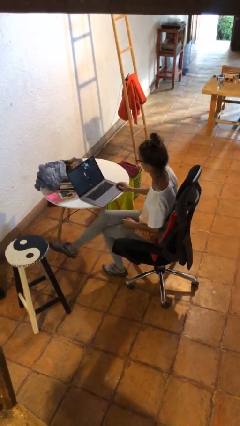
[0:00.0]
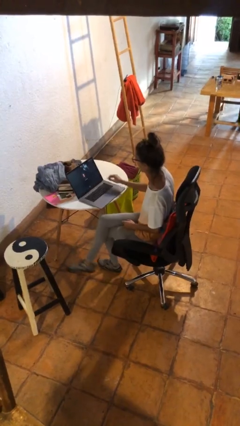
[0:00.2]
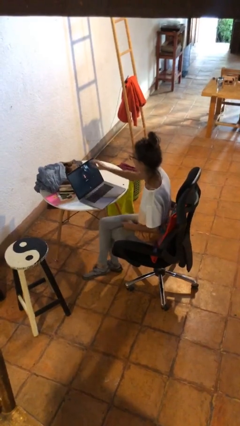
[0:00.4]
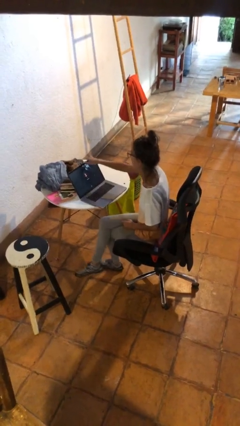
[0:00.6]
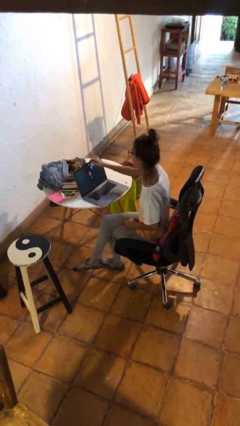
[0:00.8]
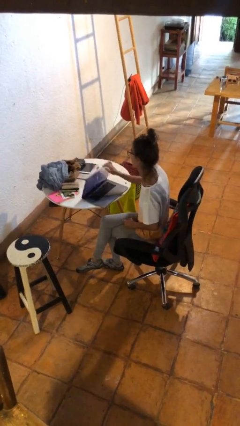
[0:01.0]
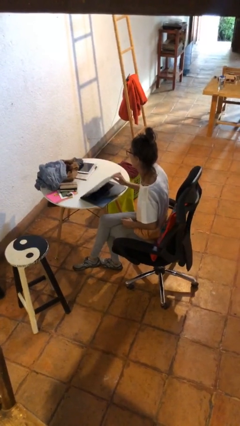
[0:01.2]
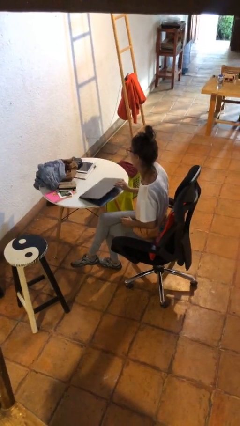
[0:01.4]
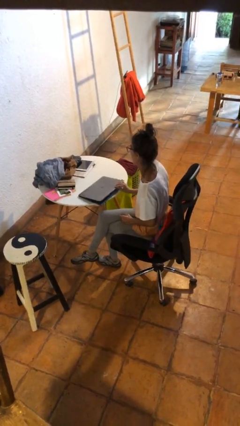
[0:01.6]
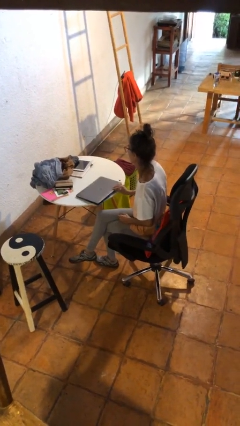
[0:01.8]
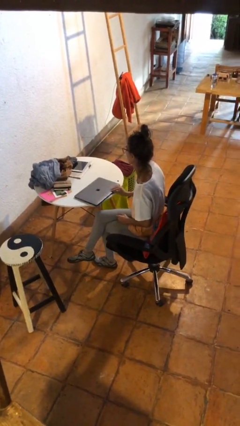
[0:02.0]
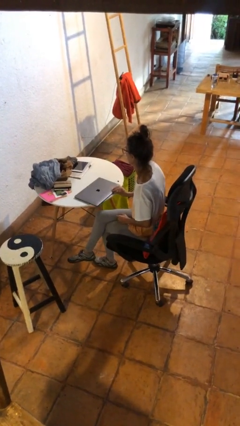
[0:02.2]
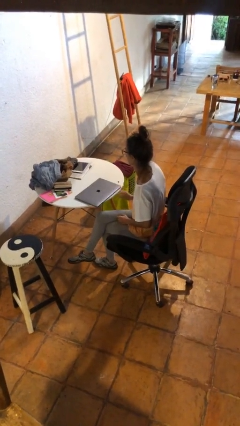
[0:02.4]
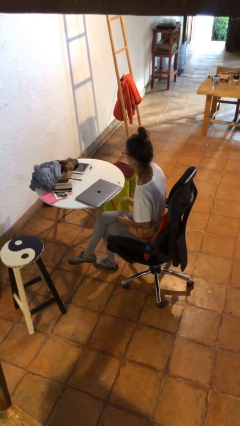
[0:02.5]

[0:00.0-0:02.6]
person closes laptop

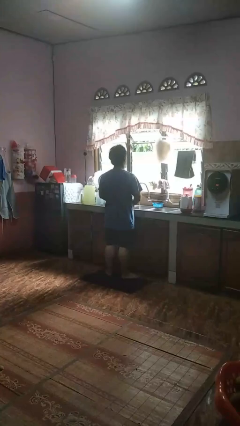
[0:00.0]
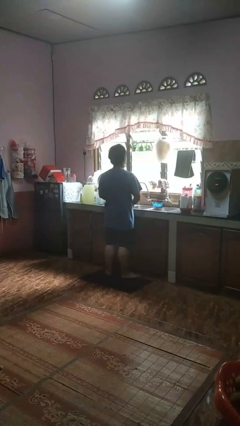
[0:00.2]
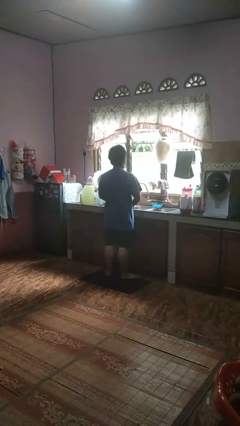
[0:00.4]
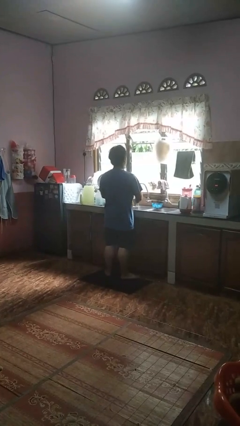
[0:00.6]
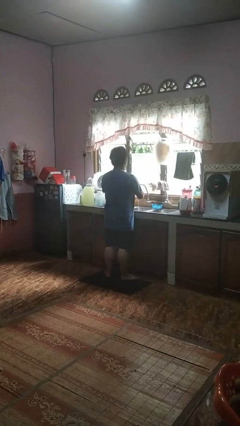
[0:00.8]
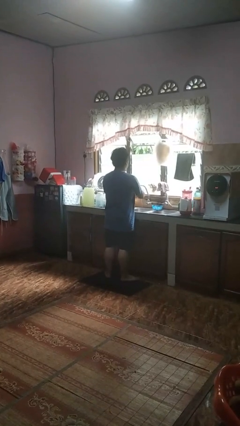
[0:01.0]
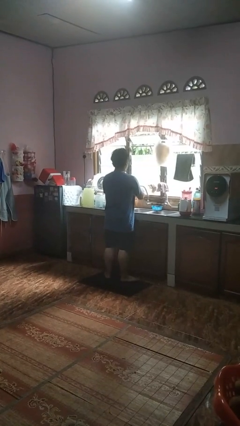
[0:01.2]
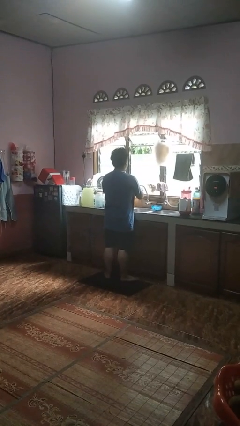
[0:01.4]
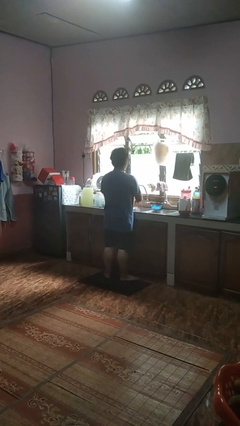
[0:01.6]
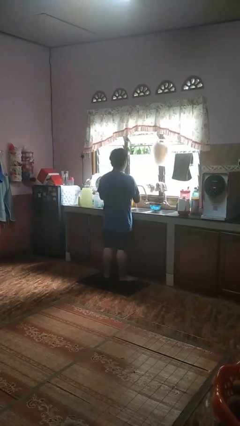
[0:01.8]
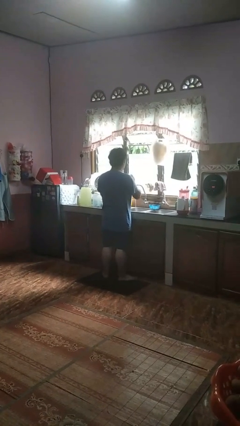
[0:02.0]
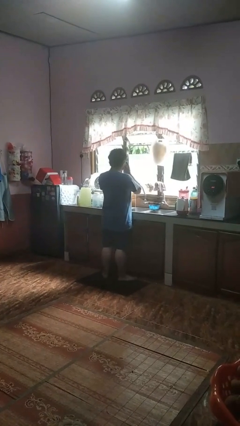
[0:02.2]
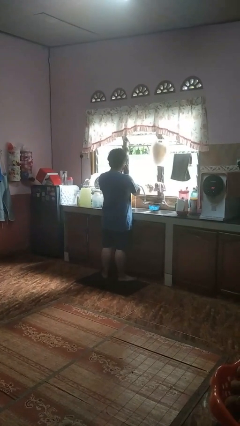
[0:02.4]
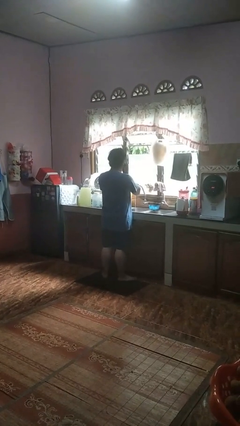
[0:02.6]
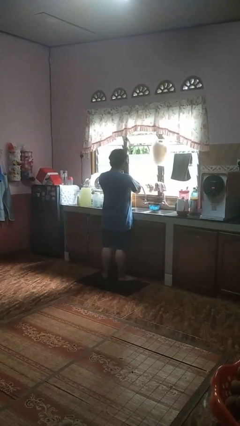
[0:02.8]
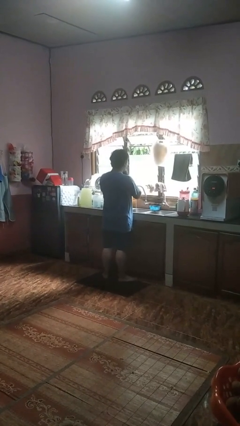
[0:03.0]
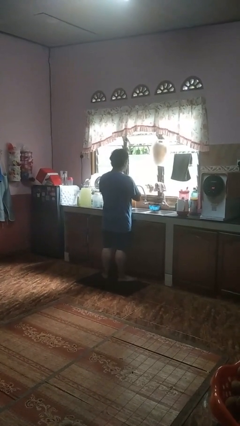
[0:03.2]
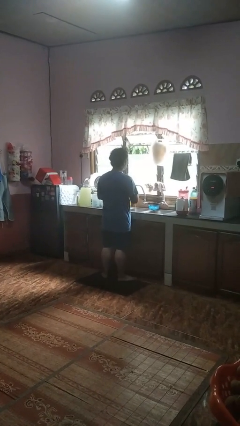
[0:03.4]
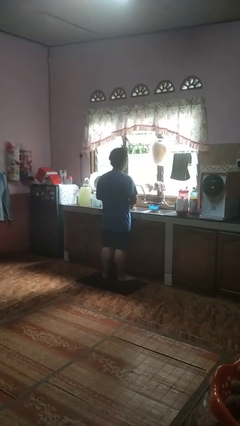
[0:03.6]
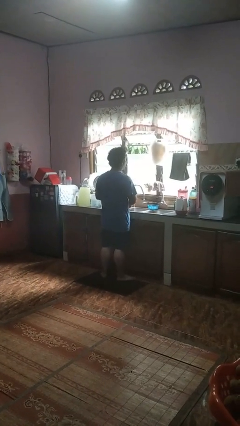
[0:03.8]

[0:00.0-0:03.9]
person washes face

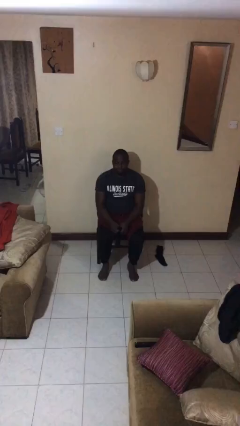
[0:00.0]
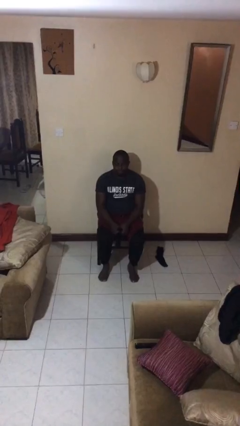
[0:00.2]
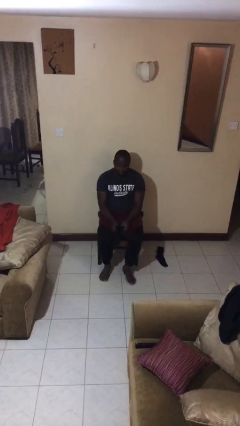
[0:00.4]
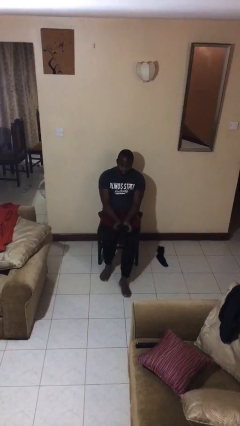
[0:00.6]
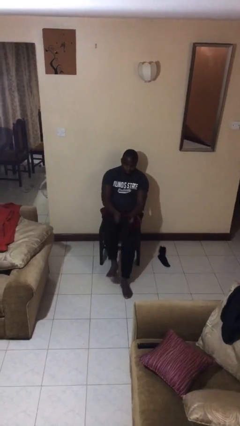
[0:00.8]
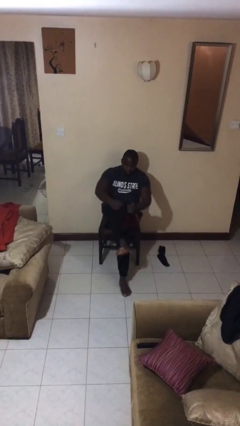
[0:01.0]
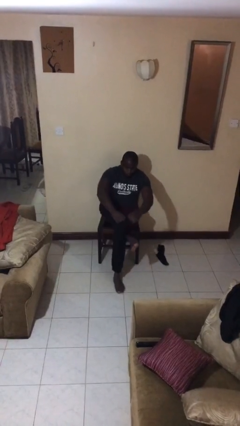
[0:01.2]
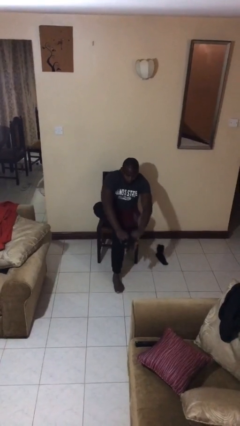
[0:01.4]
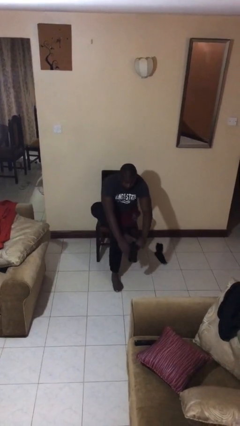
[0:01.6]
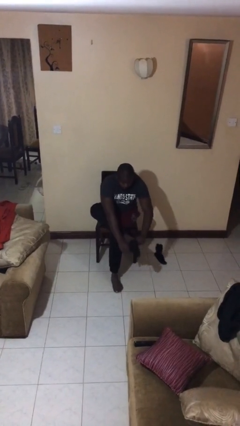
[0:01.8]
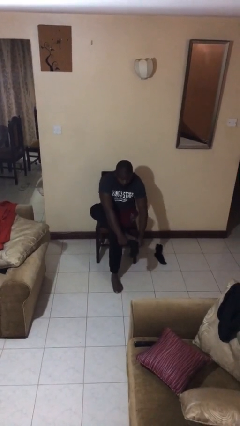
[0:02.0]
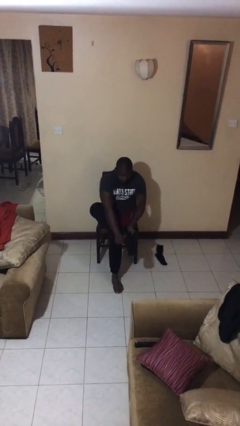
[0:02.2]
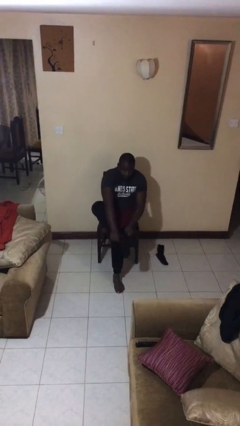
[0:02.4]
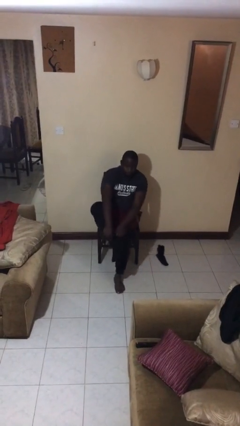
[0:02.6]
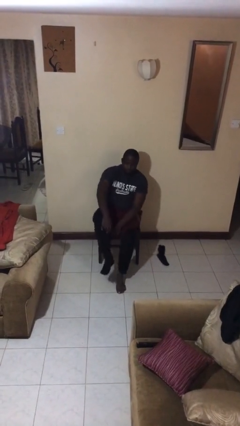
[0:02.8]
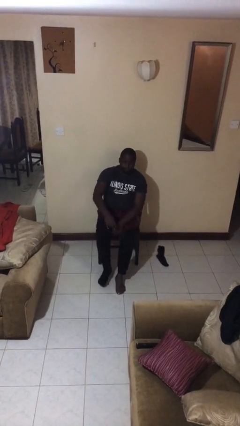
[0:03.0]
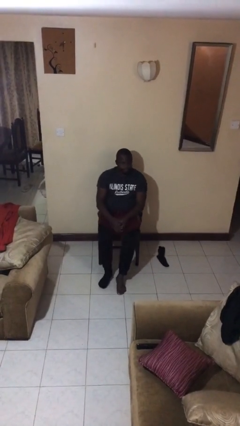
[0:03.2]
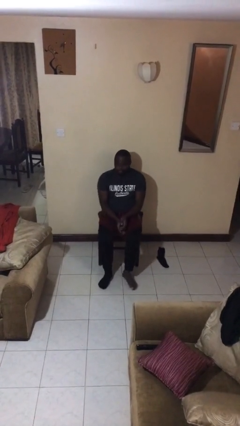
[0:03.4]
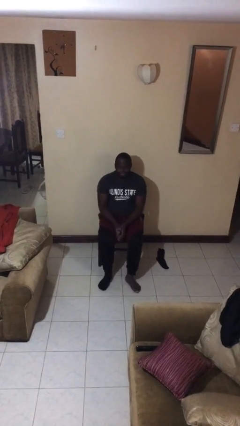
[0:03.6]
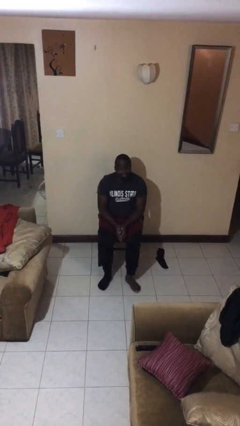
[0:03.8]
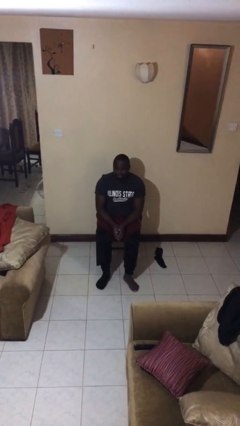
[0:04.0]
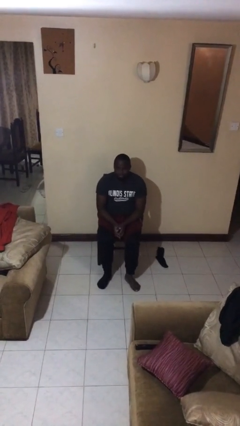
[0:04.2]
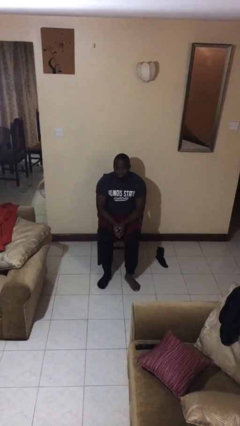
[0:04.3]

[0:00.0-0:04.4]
person puts on socks

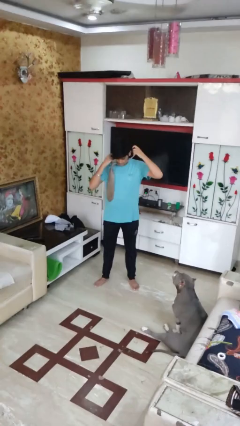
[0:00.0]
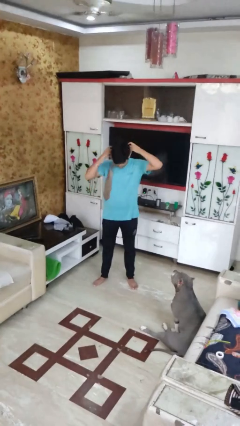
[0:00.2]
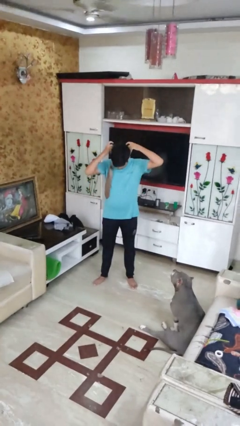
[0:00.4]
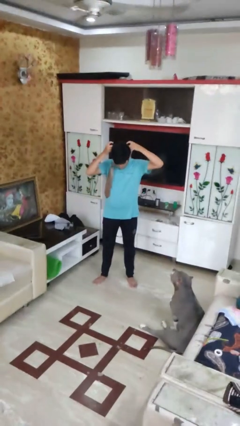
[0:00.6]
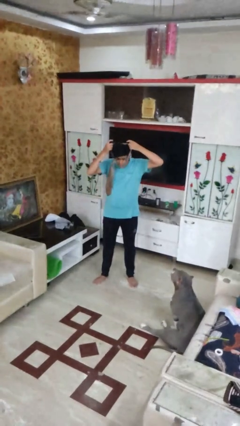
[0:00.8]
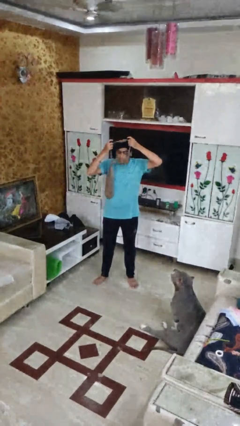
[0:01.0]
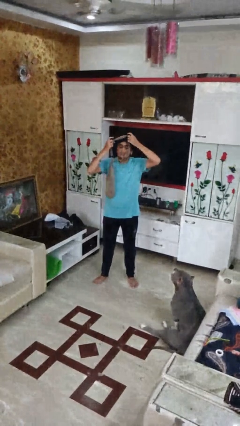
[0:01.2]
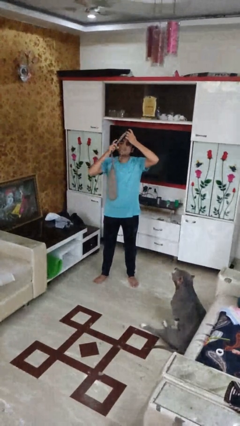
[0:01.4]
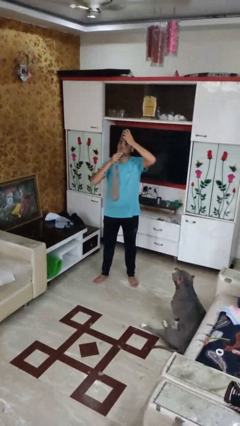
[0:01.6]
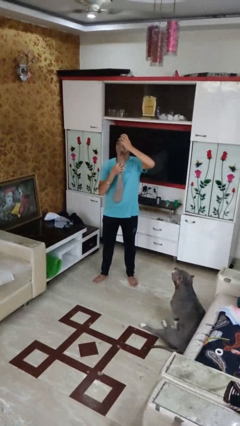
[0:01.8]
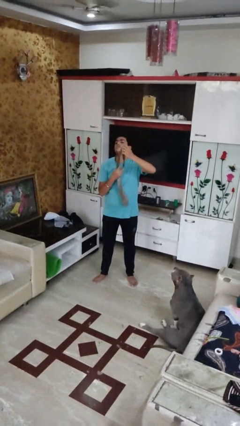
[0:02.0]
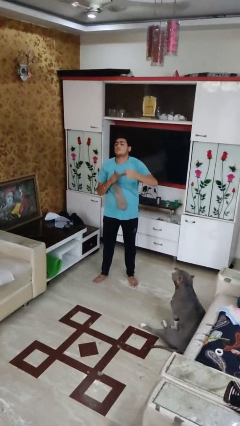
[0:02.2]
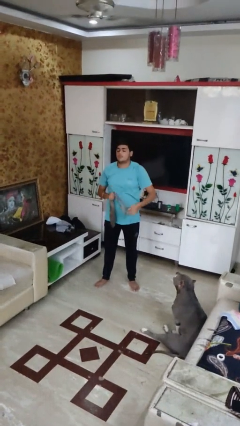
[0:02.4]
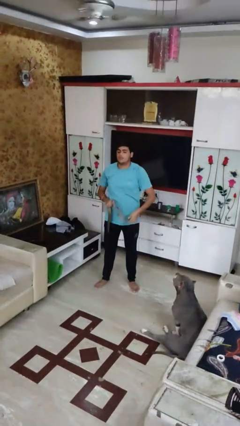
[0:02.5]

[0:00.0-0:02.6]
person takes off necktie

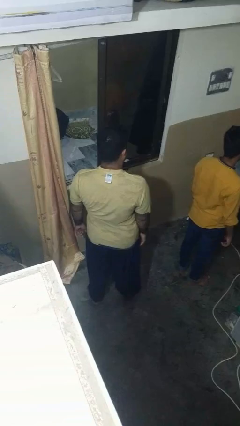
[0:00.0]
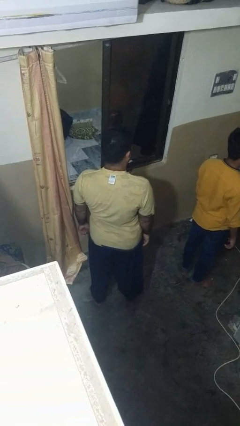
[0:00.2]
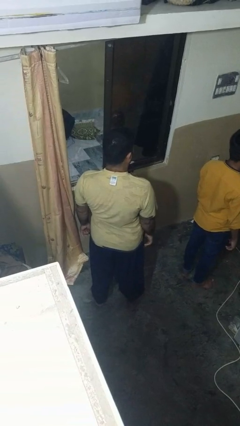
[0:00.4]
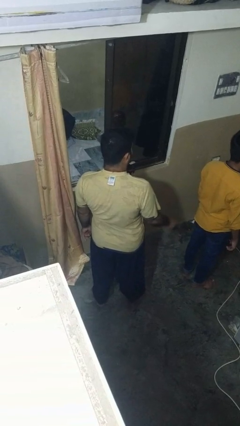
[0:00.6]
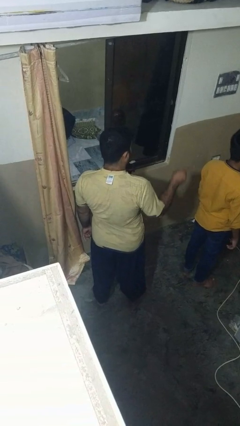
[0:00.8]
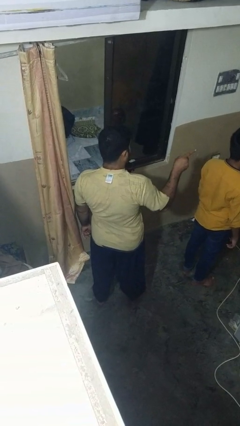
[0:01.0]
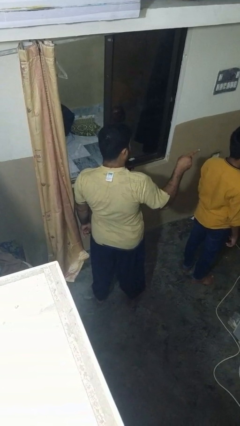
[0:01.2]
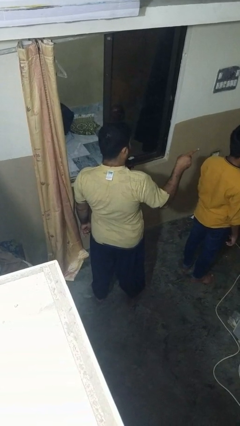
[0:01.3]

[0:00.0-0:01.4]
person points at person

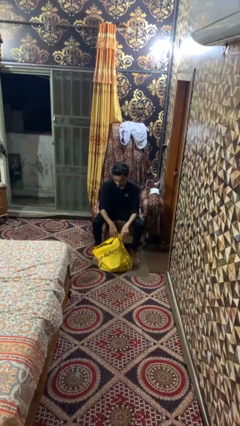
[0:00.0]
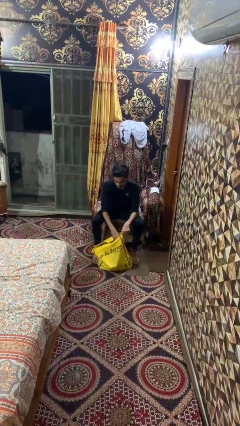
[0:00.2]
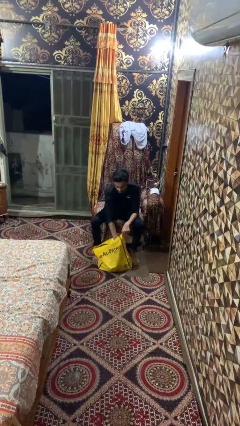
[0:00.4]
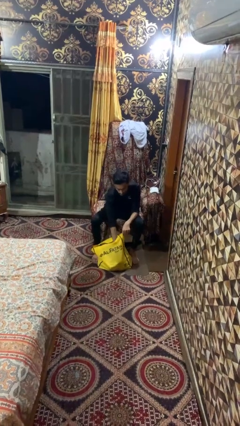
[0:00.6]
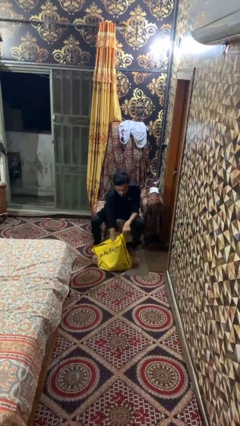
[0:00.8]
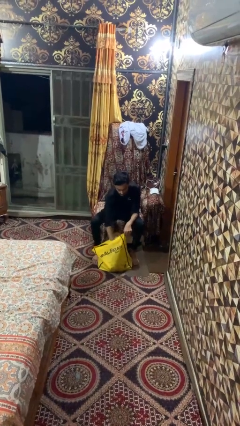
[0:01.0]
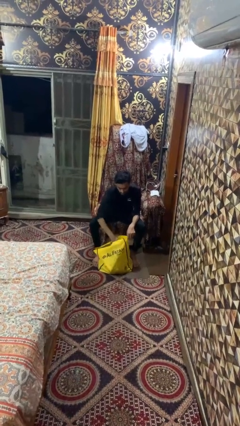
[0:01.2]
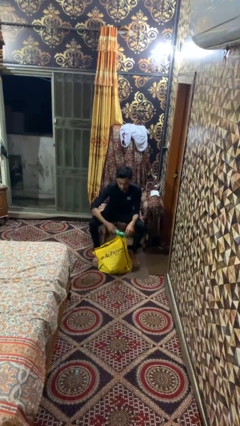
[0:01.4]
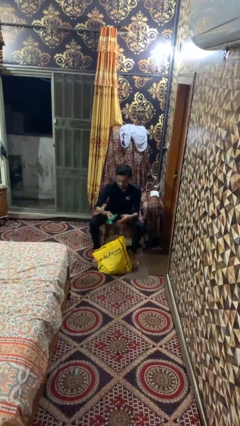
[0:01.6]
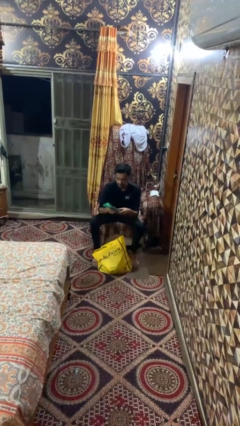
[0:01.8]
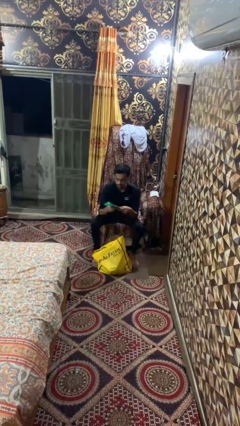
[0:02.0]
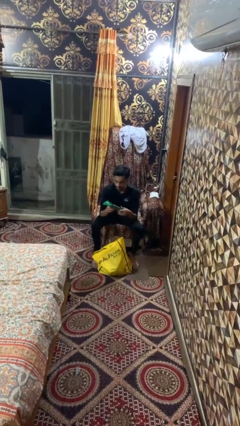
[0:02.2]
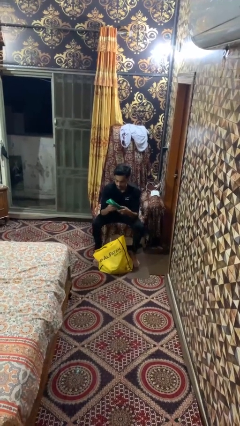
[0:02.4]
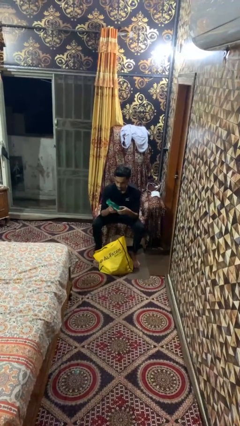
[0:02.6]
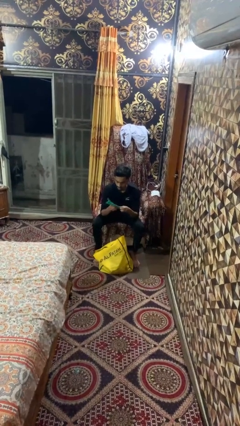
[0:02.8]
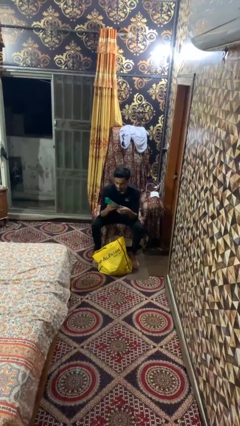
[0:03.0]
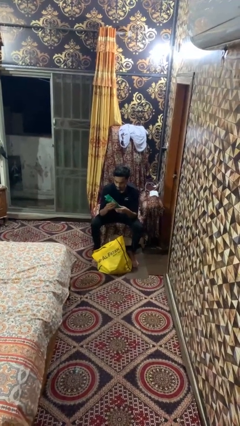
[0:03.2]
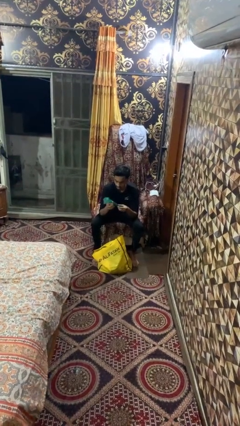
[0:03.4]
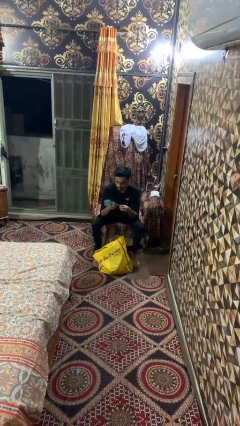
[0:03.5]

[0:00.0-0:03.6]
person takes object from bag
